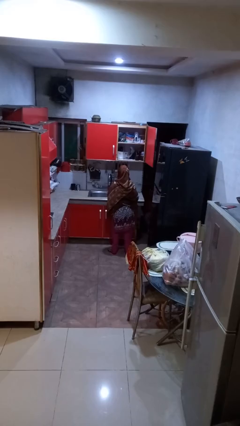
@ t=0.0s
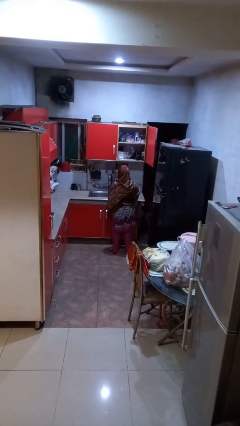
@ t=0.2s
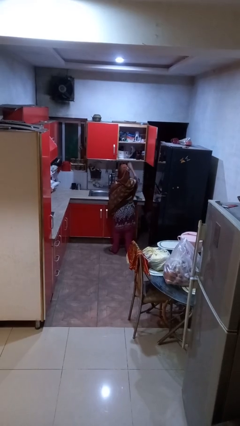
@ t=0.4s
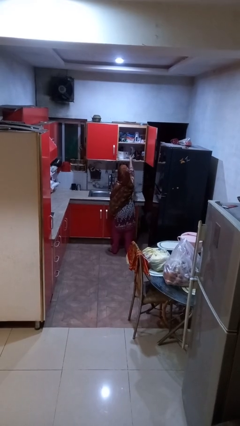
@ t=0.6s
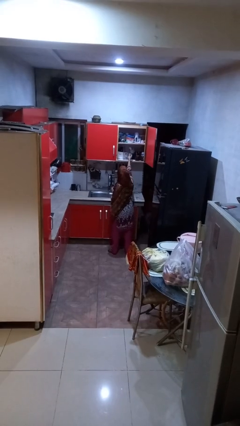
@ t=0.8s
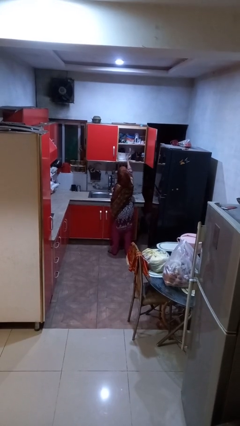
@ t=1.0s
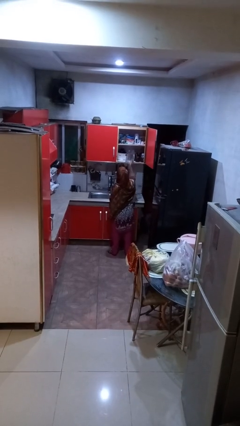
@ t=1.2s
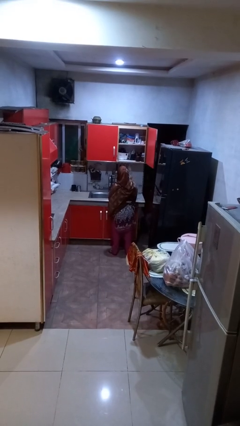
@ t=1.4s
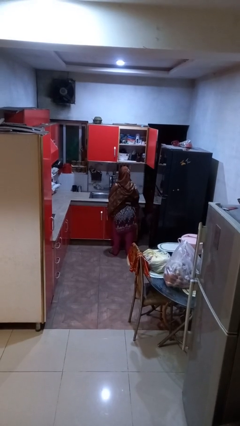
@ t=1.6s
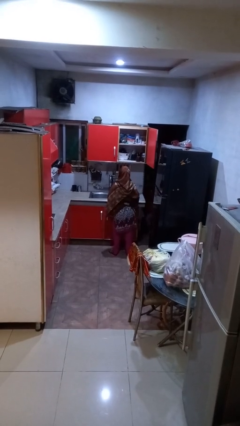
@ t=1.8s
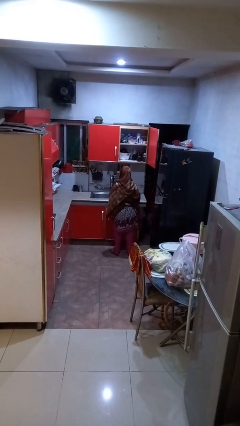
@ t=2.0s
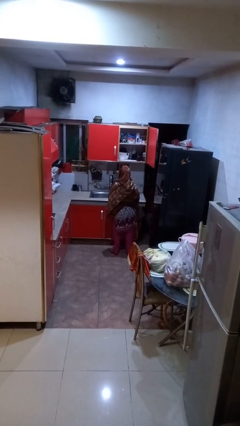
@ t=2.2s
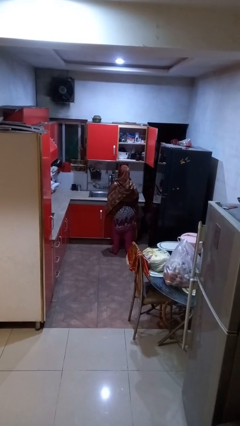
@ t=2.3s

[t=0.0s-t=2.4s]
person takes object from cabinet

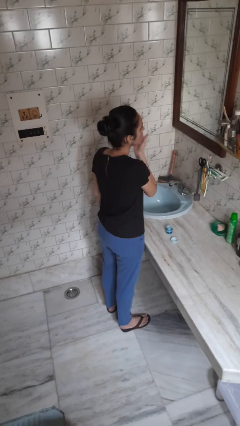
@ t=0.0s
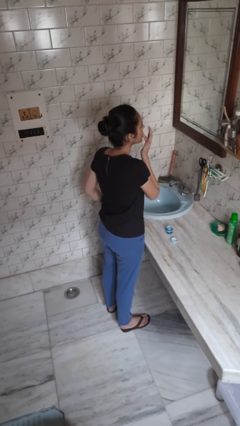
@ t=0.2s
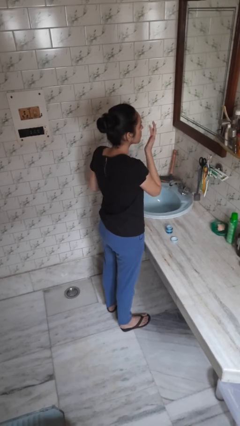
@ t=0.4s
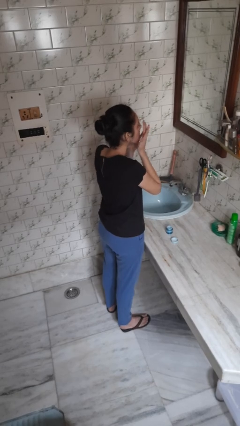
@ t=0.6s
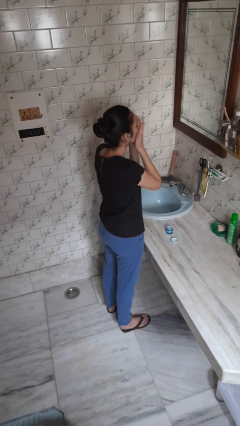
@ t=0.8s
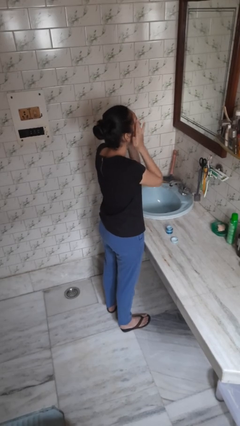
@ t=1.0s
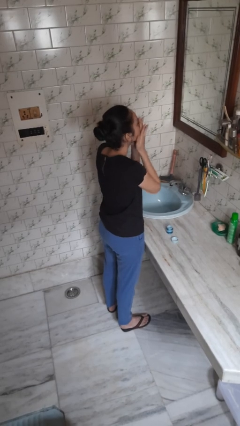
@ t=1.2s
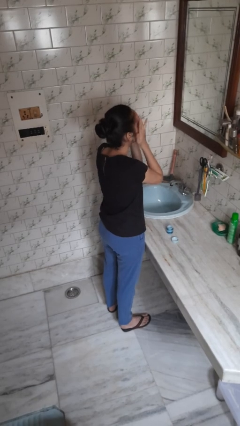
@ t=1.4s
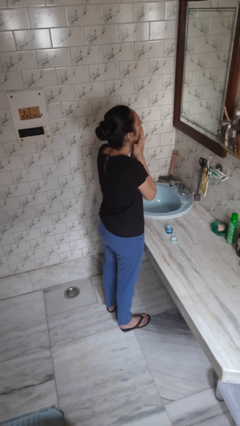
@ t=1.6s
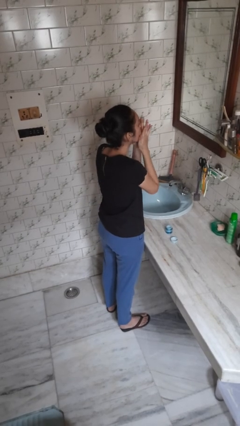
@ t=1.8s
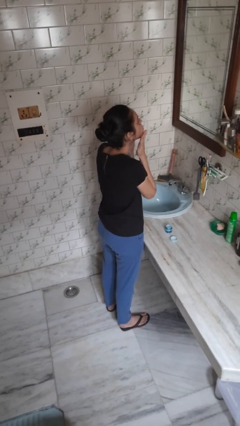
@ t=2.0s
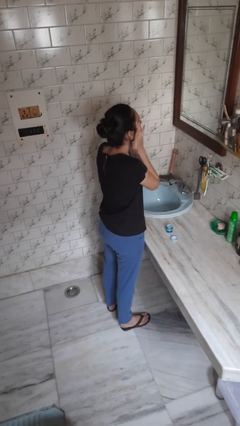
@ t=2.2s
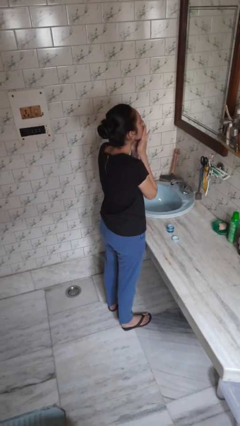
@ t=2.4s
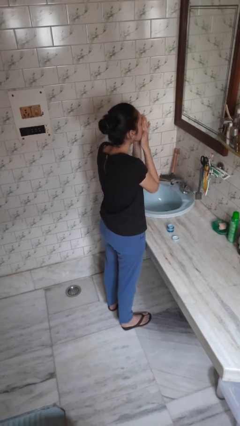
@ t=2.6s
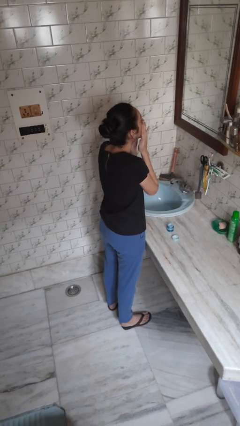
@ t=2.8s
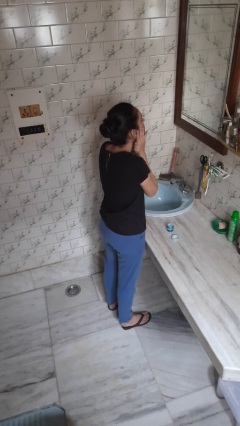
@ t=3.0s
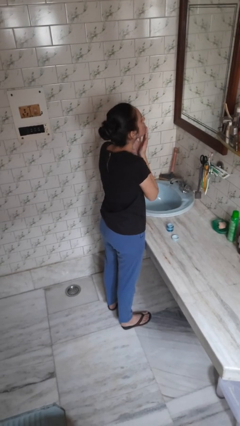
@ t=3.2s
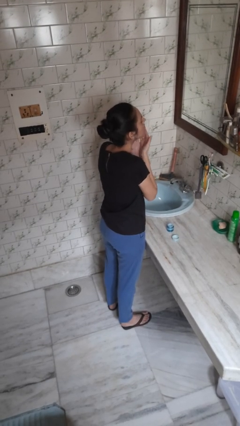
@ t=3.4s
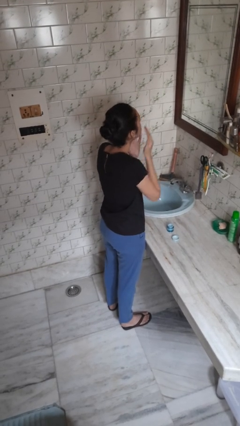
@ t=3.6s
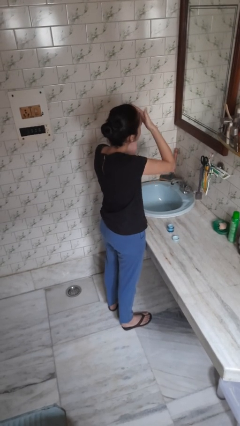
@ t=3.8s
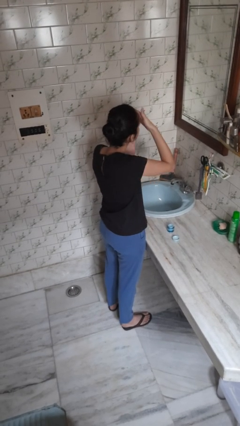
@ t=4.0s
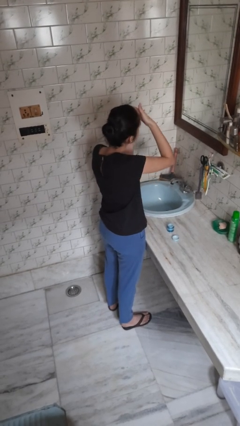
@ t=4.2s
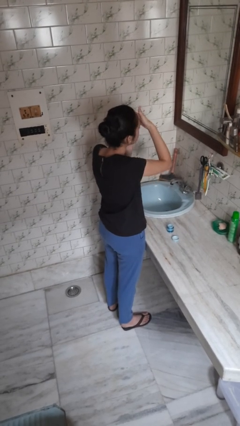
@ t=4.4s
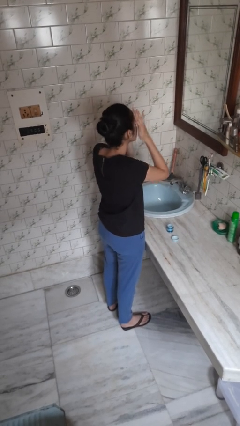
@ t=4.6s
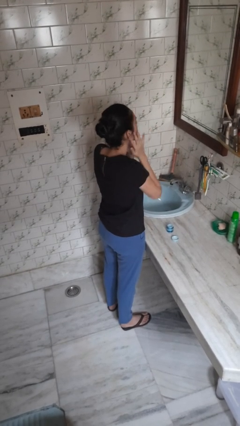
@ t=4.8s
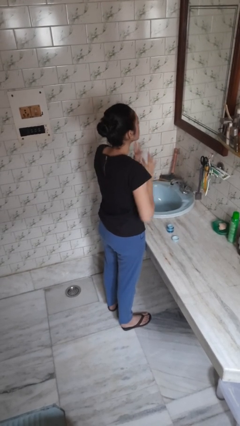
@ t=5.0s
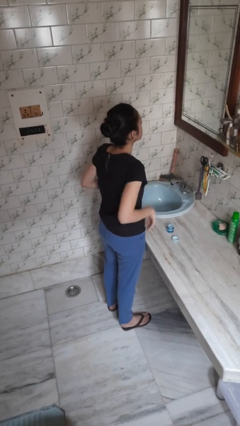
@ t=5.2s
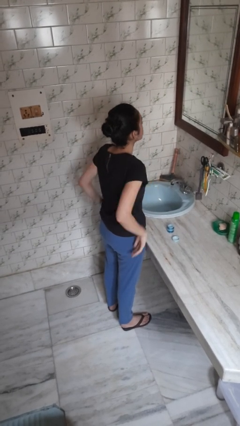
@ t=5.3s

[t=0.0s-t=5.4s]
person applies facial moisturizer

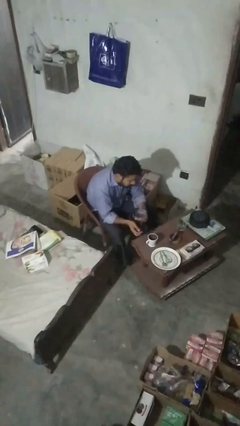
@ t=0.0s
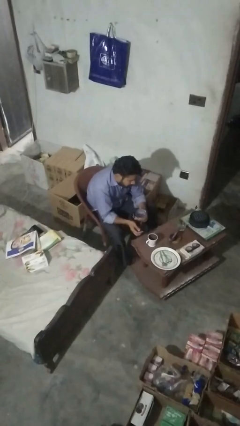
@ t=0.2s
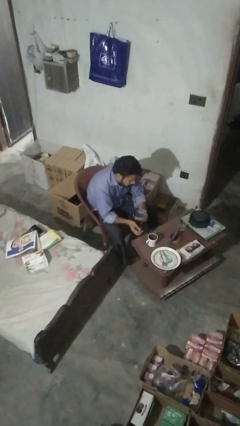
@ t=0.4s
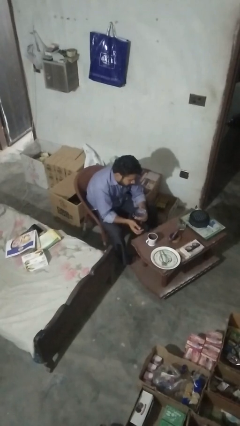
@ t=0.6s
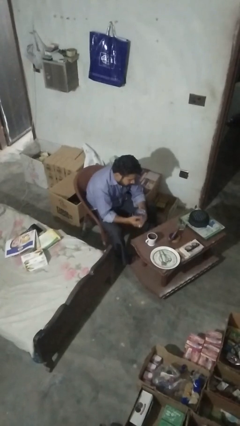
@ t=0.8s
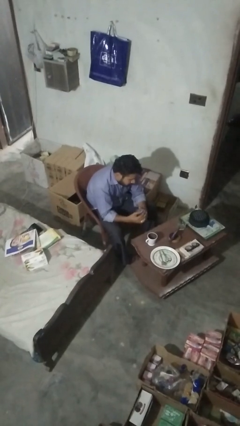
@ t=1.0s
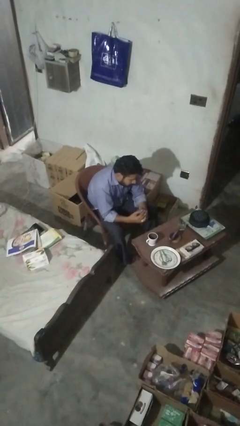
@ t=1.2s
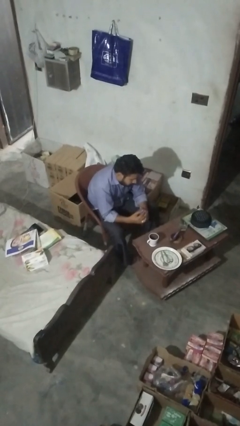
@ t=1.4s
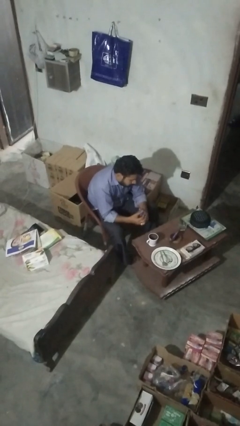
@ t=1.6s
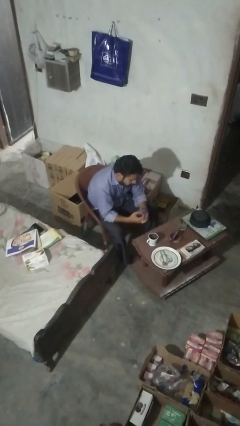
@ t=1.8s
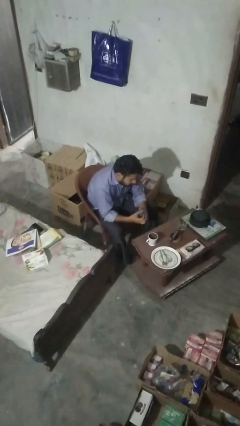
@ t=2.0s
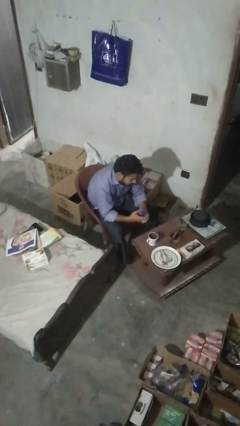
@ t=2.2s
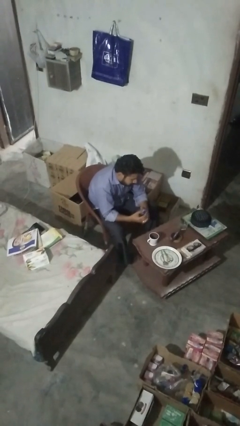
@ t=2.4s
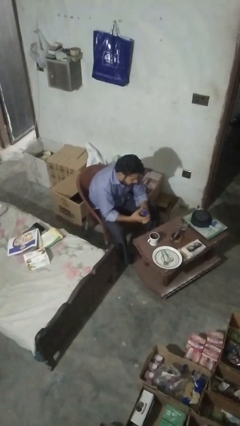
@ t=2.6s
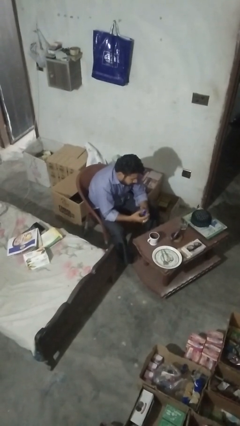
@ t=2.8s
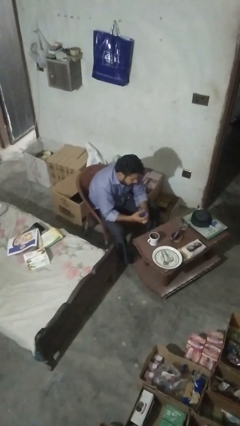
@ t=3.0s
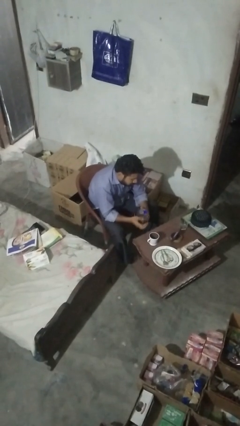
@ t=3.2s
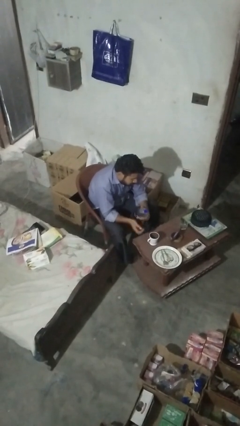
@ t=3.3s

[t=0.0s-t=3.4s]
person screws lid to bottle

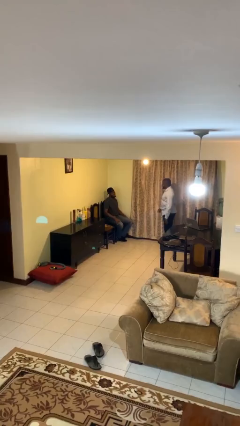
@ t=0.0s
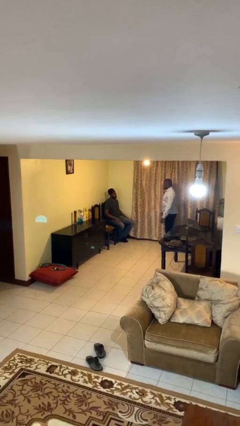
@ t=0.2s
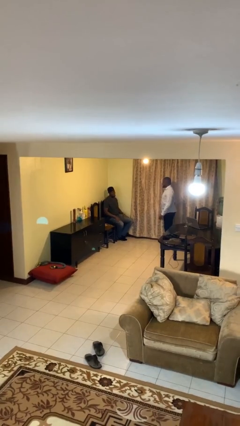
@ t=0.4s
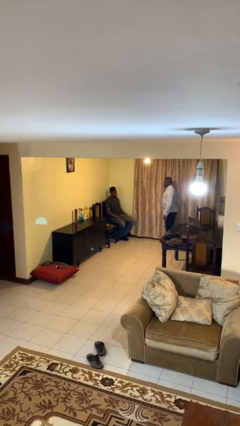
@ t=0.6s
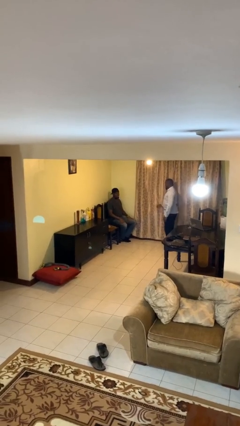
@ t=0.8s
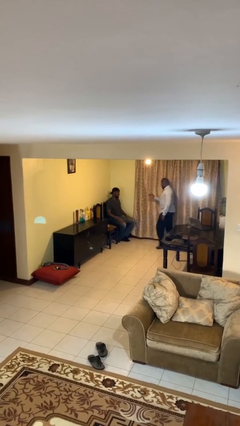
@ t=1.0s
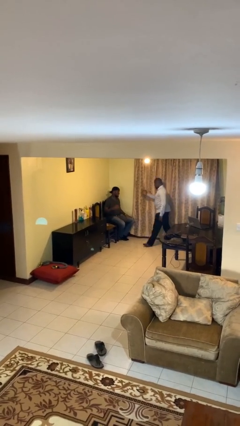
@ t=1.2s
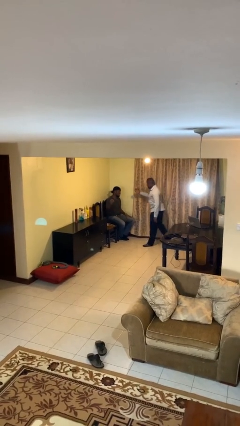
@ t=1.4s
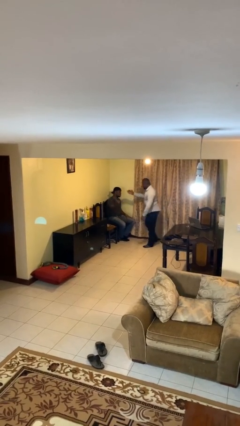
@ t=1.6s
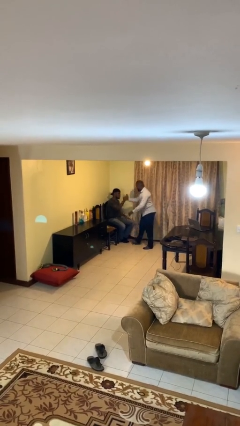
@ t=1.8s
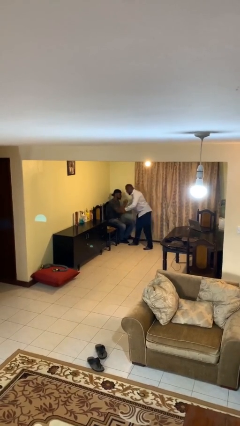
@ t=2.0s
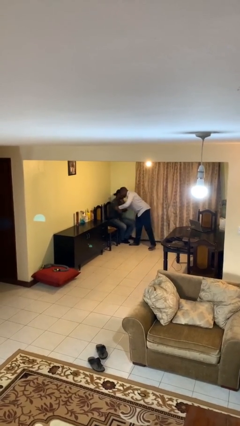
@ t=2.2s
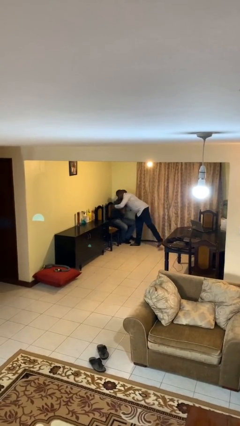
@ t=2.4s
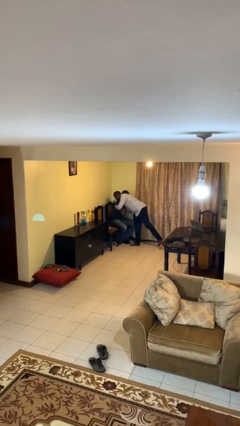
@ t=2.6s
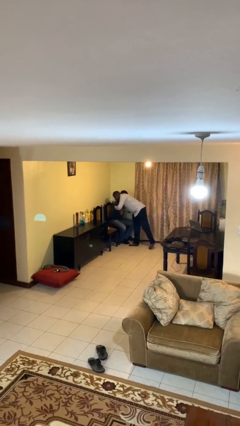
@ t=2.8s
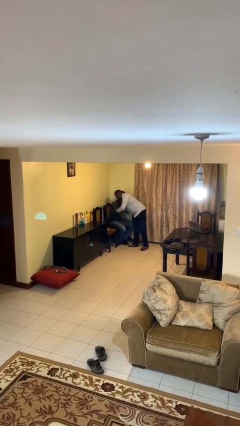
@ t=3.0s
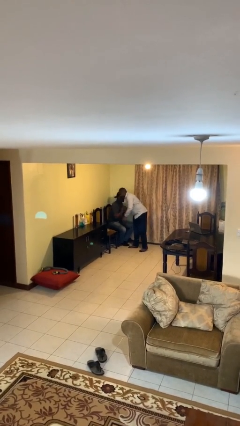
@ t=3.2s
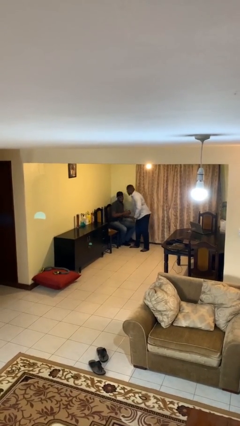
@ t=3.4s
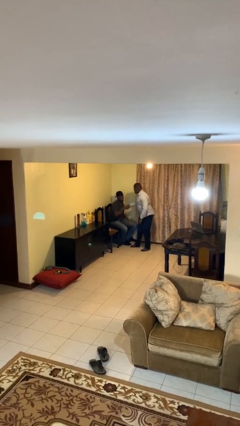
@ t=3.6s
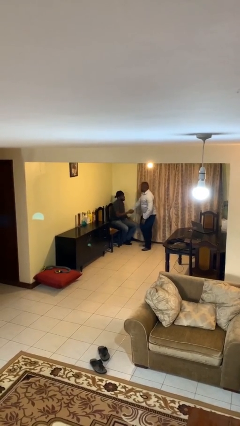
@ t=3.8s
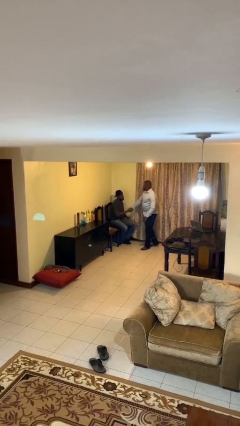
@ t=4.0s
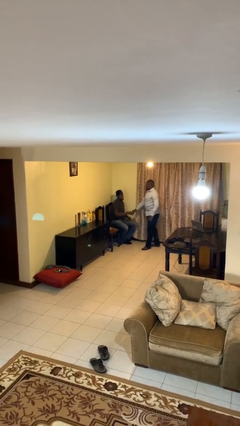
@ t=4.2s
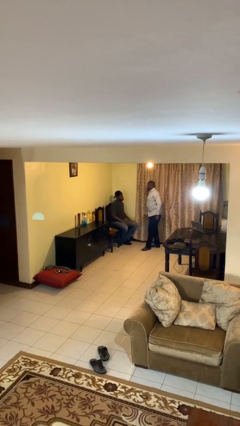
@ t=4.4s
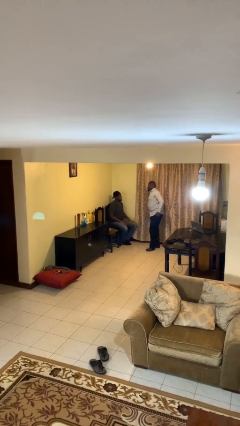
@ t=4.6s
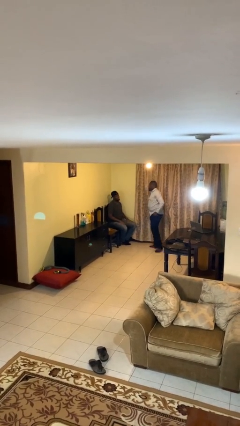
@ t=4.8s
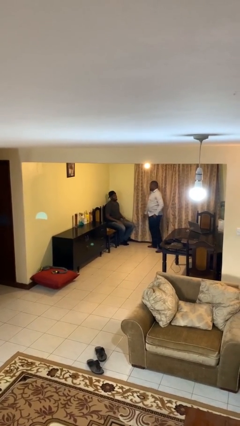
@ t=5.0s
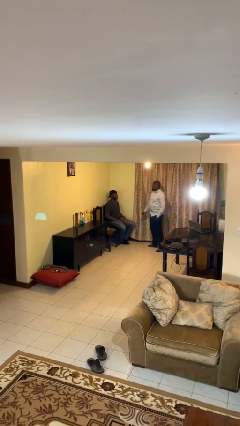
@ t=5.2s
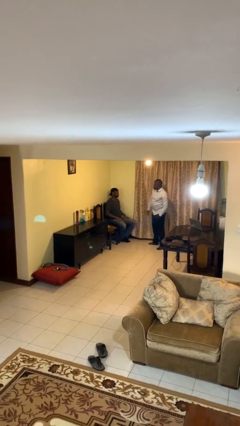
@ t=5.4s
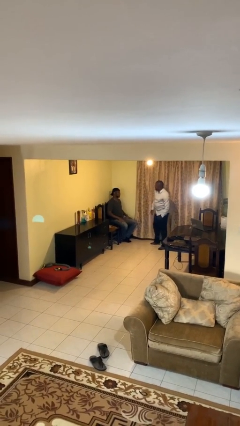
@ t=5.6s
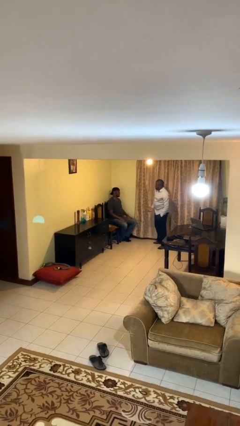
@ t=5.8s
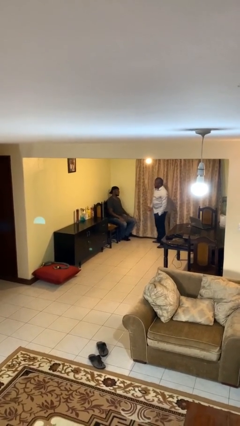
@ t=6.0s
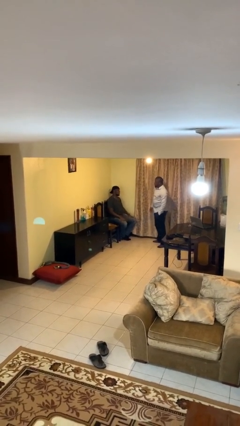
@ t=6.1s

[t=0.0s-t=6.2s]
person embraces person
